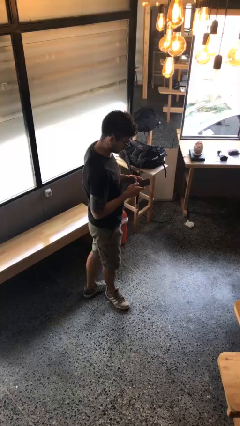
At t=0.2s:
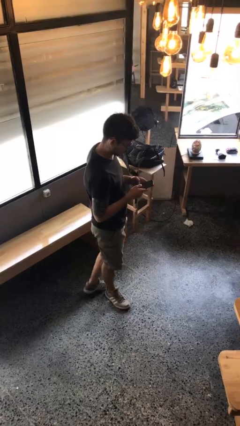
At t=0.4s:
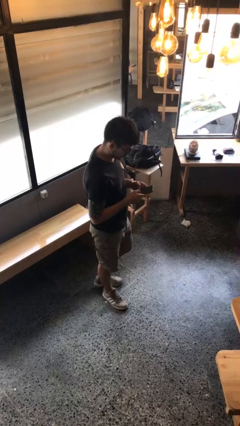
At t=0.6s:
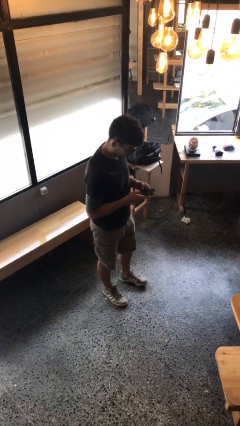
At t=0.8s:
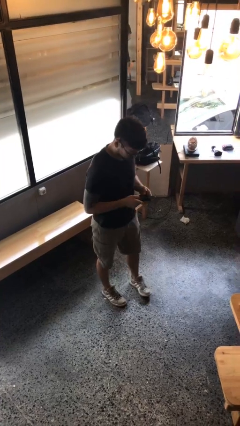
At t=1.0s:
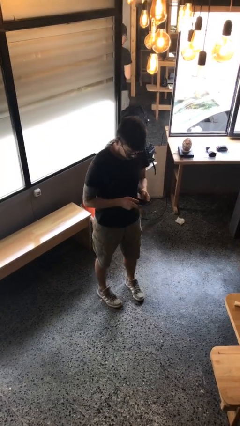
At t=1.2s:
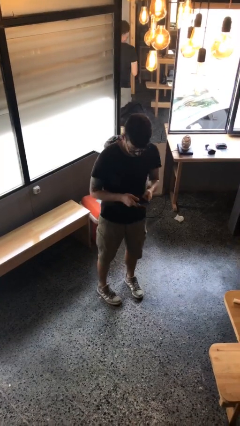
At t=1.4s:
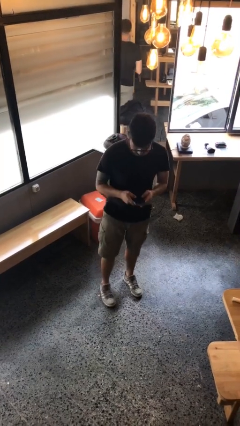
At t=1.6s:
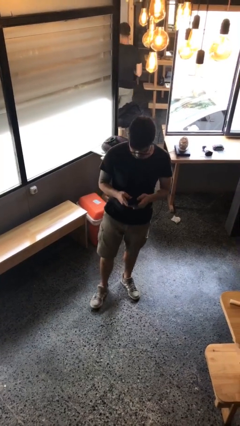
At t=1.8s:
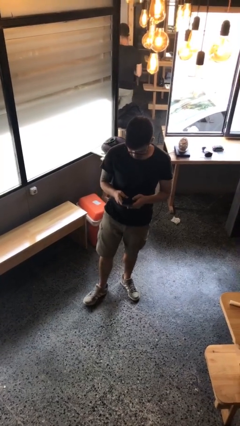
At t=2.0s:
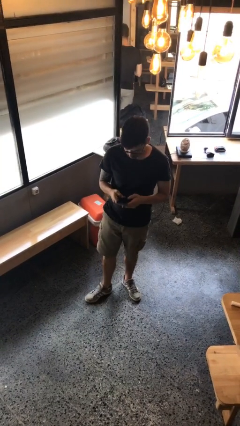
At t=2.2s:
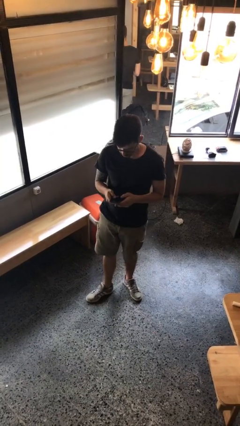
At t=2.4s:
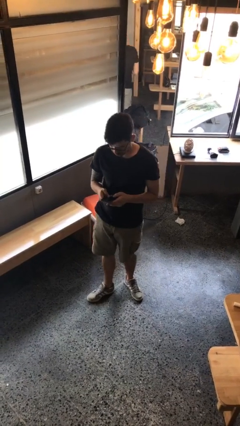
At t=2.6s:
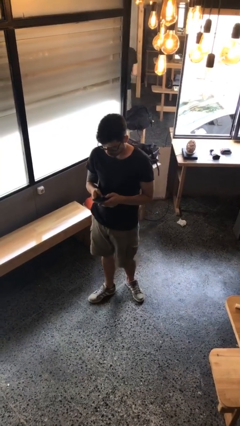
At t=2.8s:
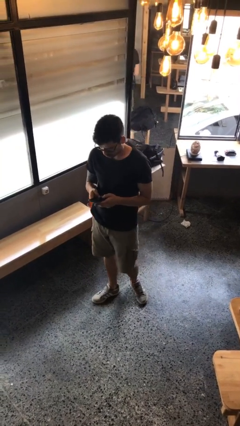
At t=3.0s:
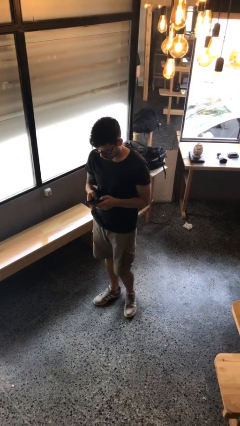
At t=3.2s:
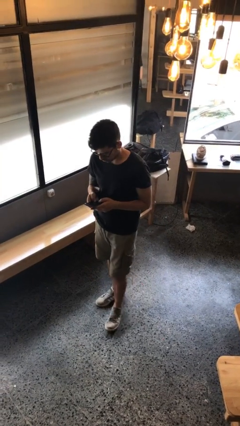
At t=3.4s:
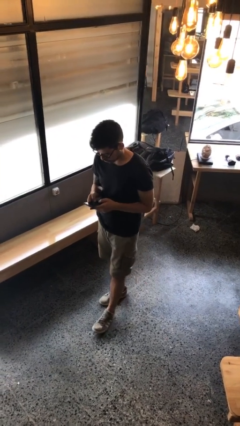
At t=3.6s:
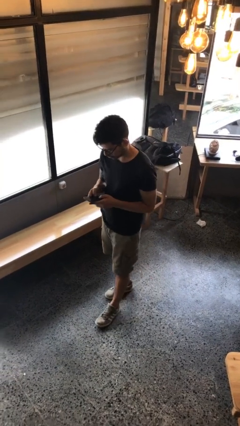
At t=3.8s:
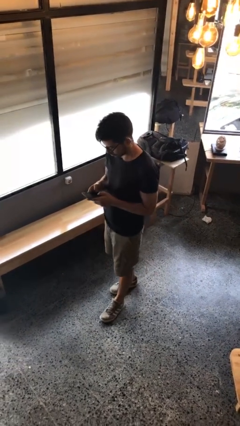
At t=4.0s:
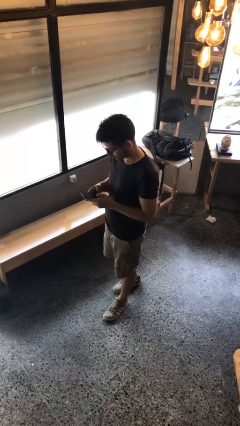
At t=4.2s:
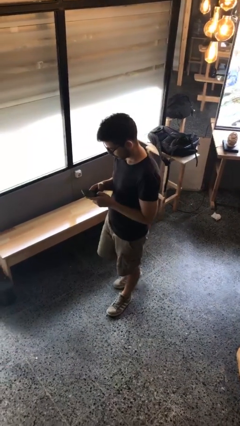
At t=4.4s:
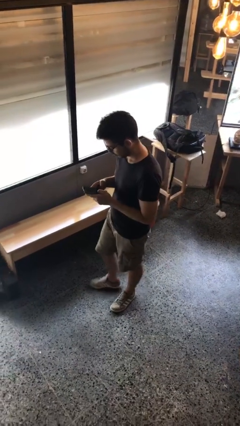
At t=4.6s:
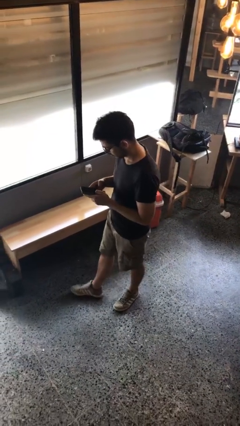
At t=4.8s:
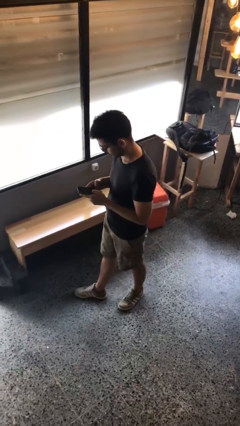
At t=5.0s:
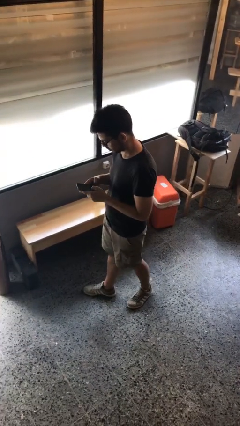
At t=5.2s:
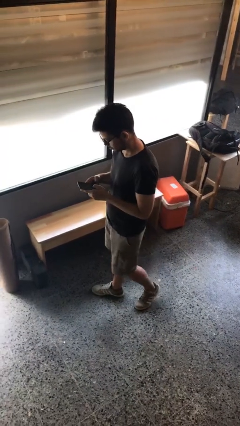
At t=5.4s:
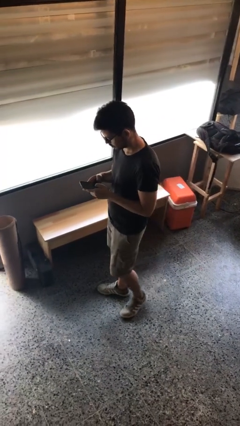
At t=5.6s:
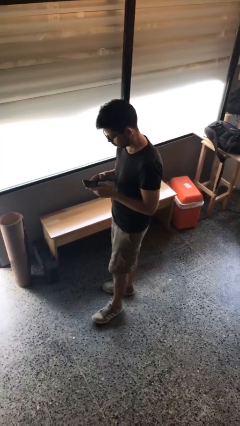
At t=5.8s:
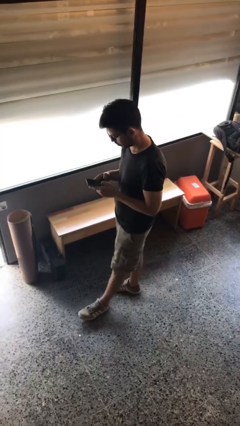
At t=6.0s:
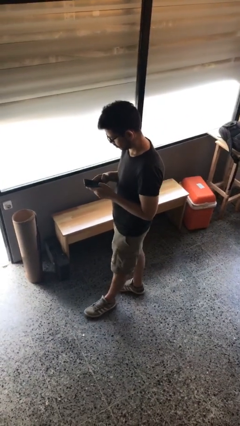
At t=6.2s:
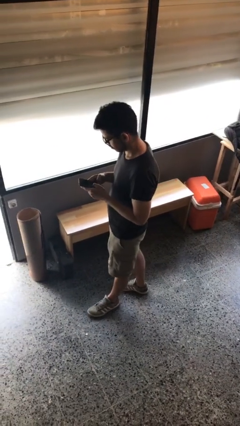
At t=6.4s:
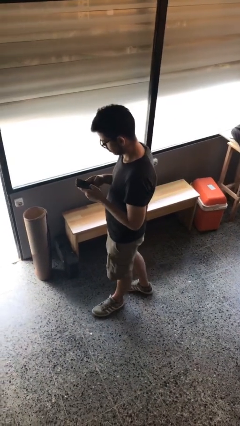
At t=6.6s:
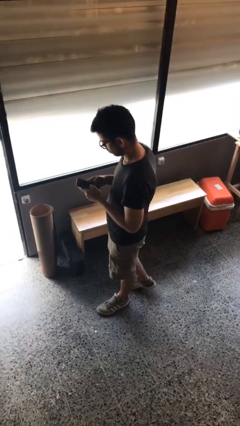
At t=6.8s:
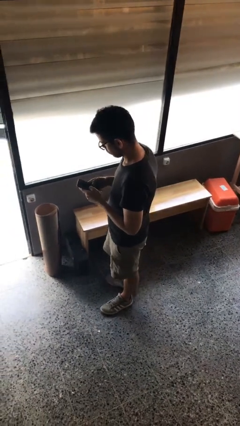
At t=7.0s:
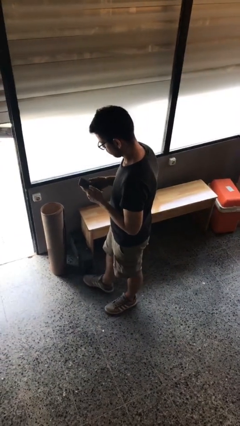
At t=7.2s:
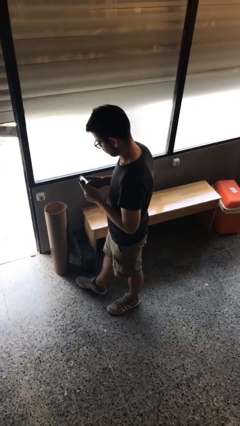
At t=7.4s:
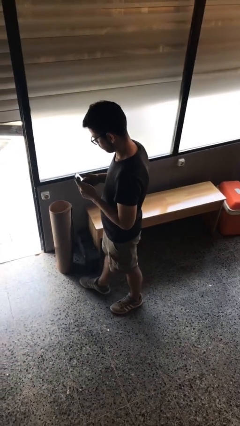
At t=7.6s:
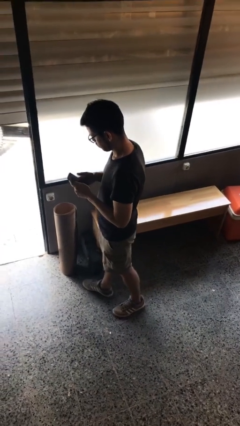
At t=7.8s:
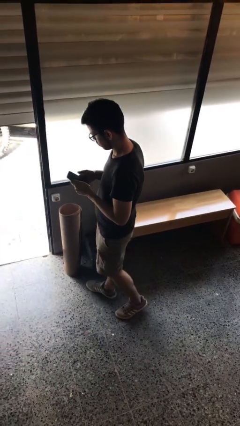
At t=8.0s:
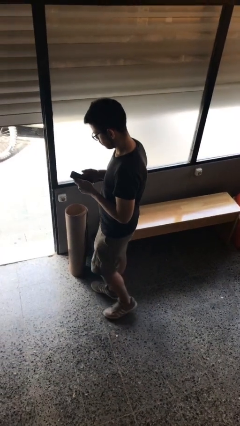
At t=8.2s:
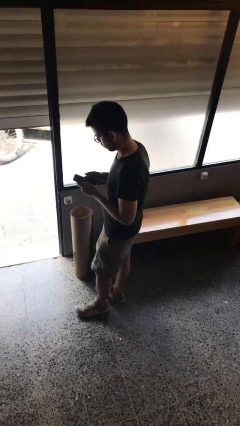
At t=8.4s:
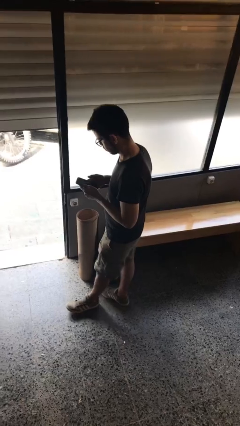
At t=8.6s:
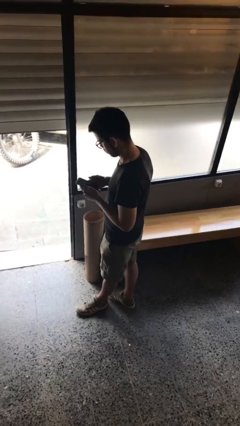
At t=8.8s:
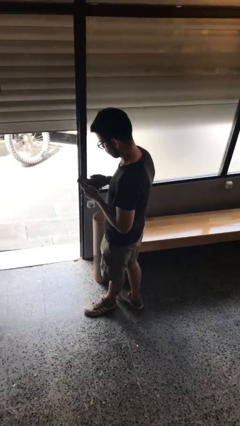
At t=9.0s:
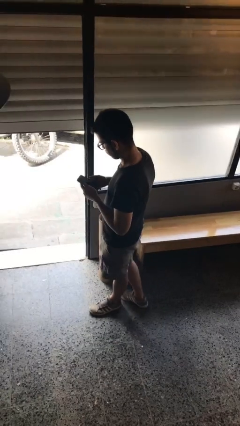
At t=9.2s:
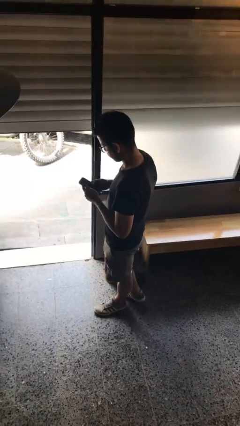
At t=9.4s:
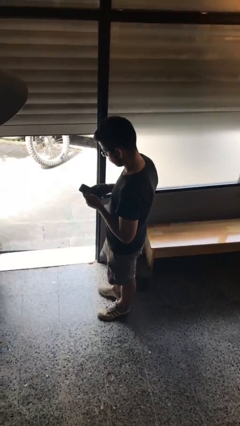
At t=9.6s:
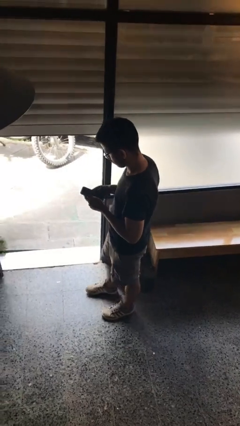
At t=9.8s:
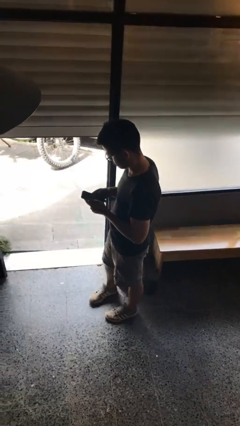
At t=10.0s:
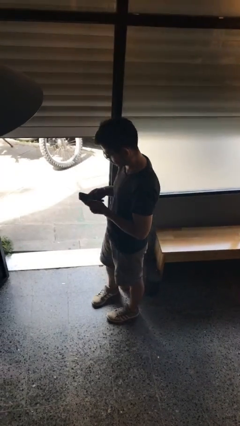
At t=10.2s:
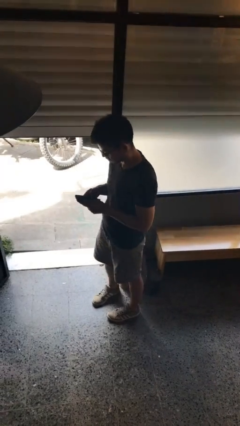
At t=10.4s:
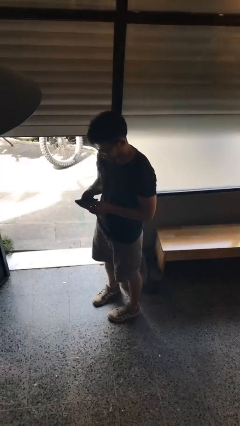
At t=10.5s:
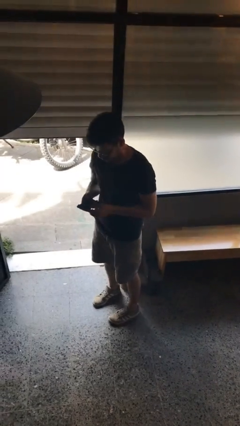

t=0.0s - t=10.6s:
person texts on phone

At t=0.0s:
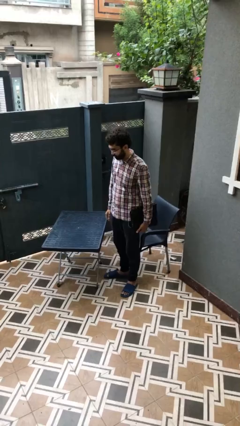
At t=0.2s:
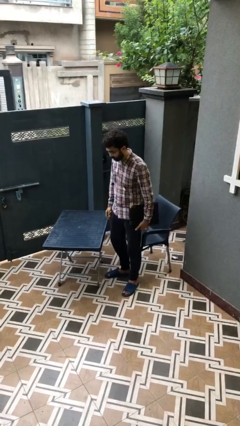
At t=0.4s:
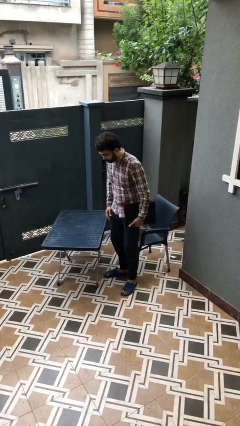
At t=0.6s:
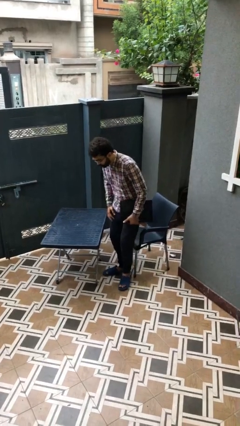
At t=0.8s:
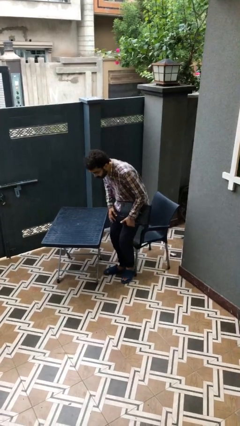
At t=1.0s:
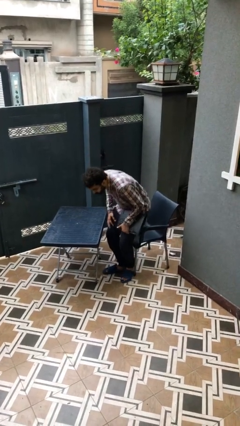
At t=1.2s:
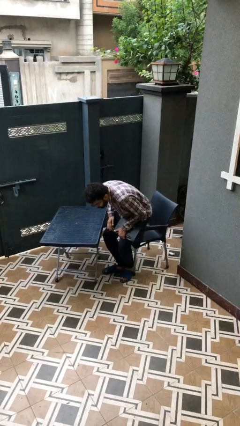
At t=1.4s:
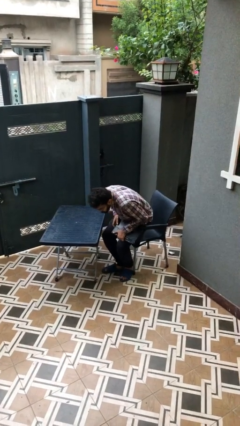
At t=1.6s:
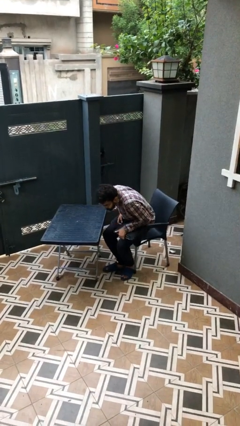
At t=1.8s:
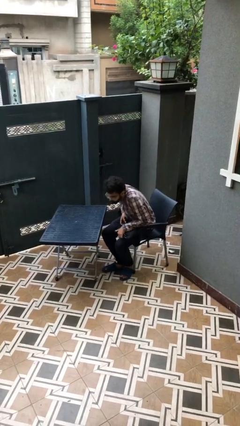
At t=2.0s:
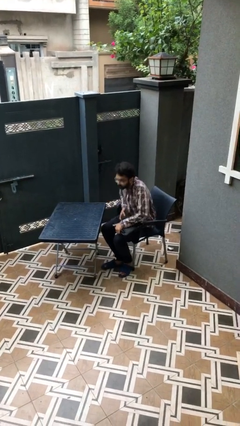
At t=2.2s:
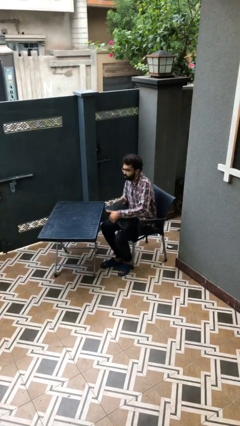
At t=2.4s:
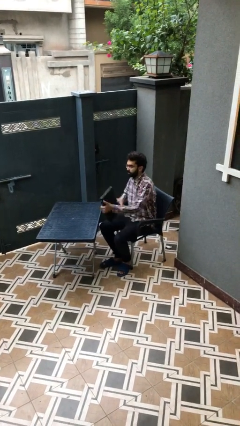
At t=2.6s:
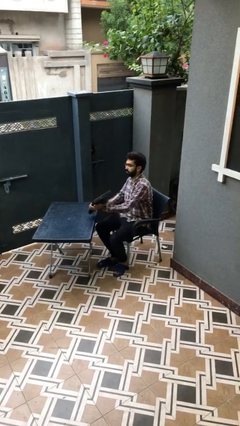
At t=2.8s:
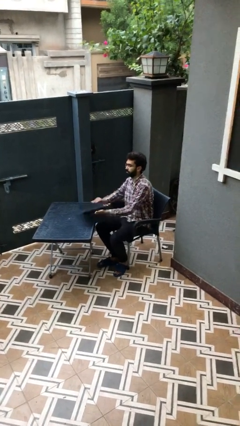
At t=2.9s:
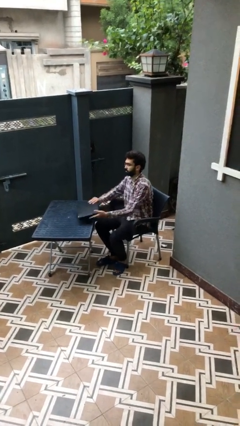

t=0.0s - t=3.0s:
person sits down

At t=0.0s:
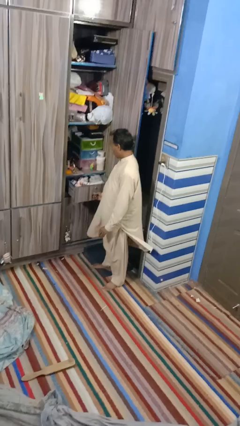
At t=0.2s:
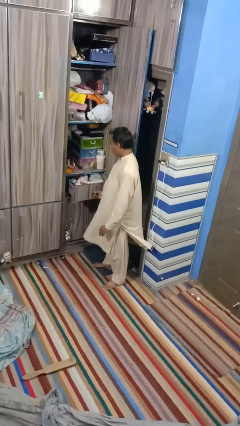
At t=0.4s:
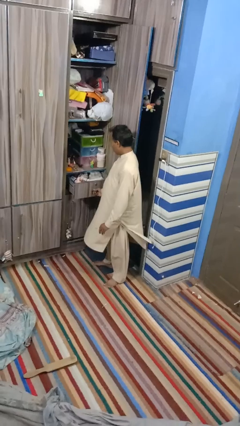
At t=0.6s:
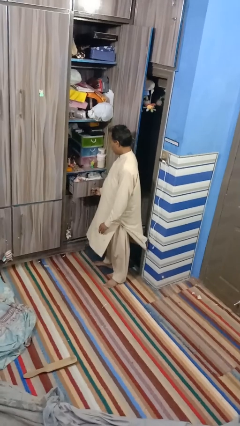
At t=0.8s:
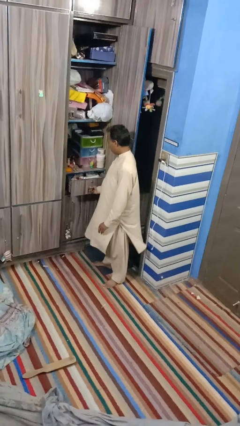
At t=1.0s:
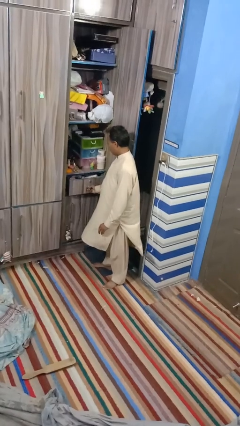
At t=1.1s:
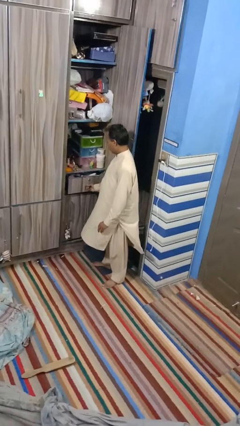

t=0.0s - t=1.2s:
person closes dresser drawer

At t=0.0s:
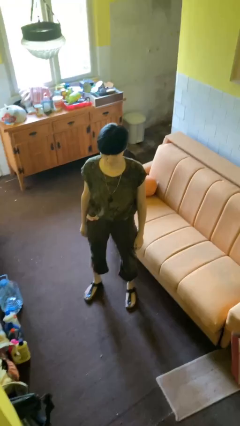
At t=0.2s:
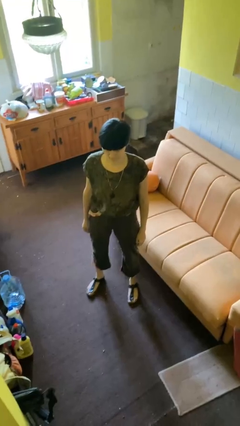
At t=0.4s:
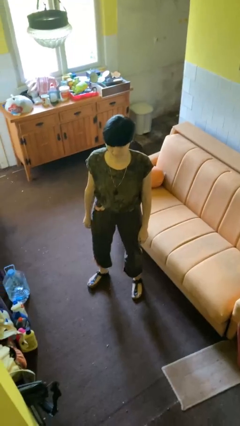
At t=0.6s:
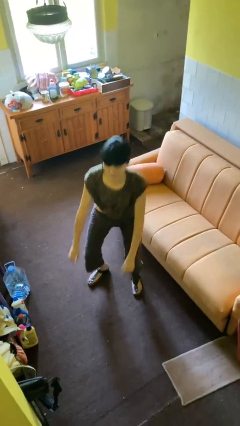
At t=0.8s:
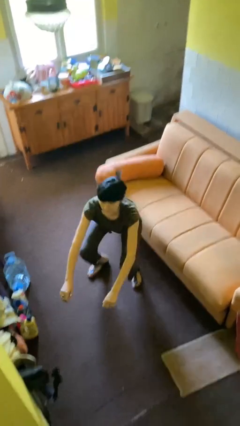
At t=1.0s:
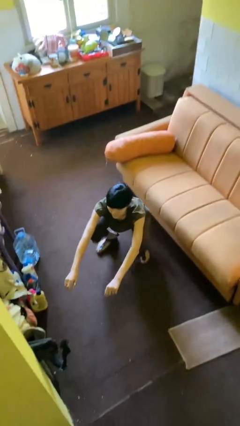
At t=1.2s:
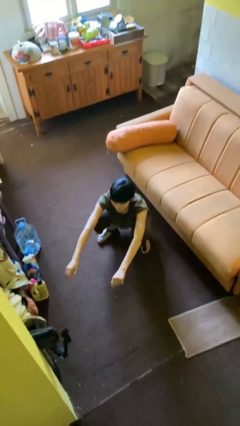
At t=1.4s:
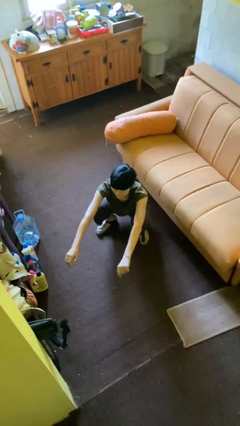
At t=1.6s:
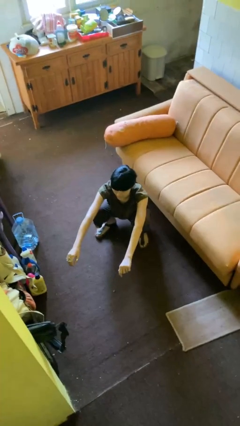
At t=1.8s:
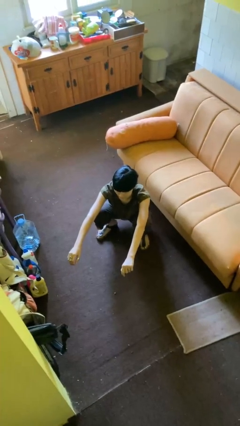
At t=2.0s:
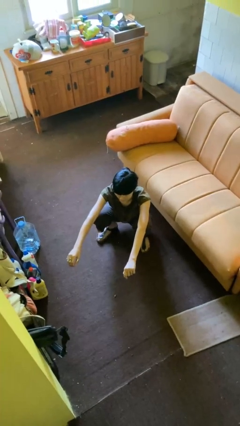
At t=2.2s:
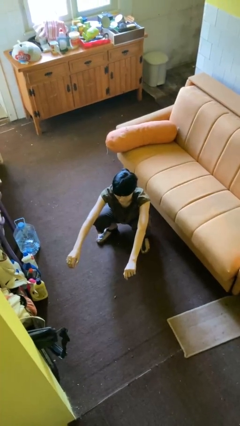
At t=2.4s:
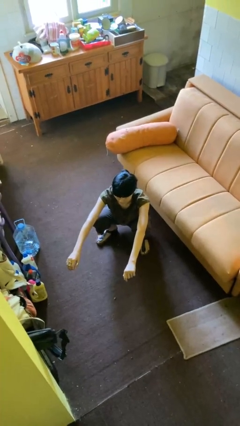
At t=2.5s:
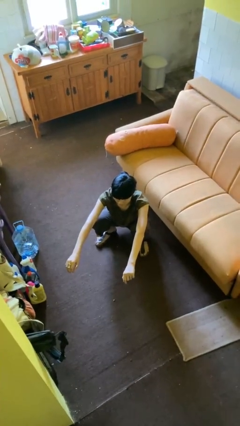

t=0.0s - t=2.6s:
person squats

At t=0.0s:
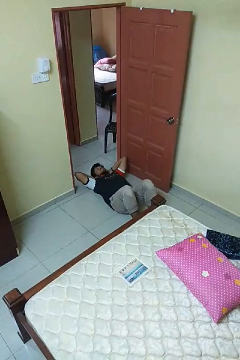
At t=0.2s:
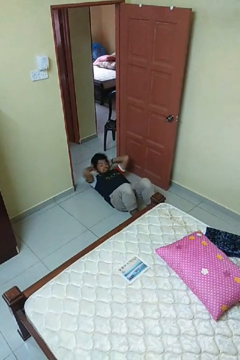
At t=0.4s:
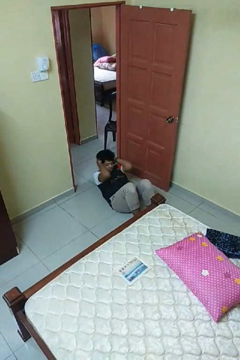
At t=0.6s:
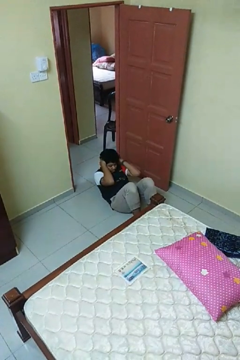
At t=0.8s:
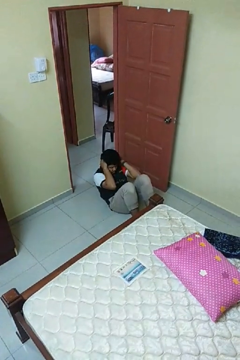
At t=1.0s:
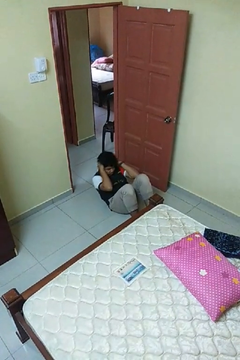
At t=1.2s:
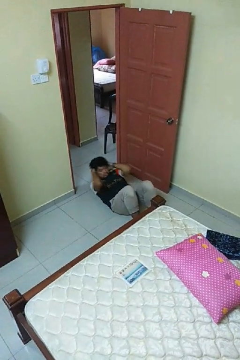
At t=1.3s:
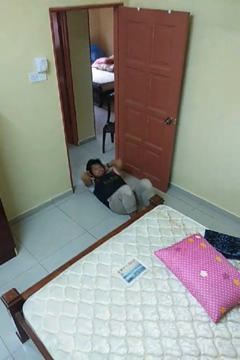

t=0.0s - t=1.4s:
person exercises with situp
